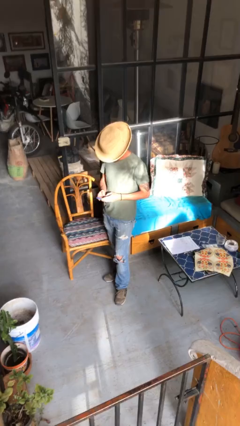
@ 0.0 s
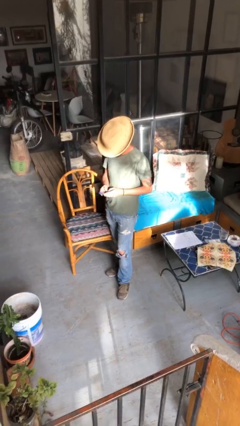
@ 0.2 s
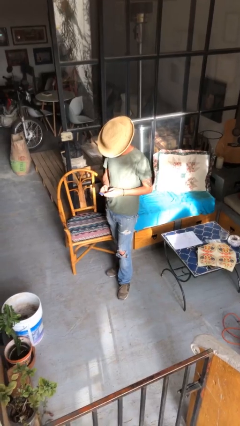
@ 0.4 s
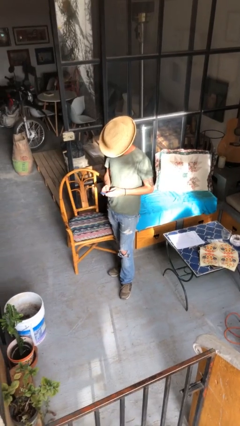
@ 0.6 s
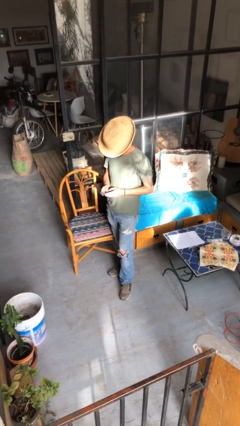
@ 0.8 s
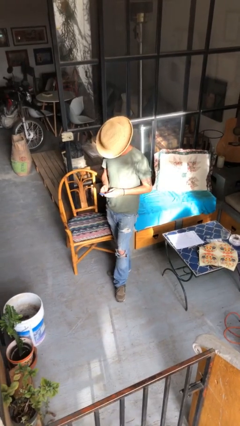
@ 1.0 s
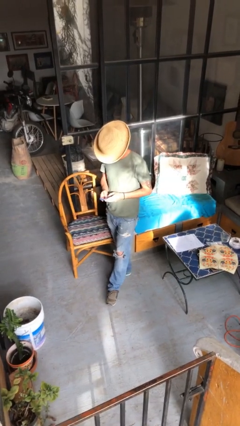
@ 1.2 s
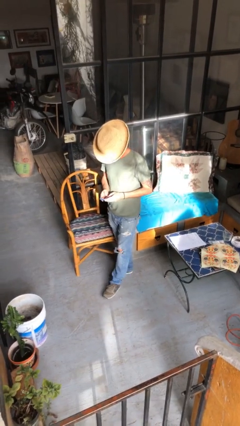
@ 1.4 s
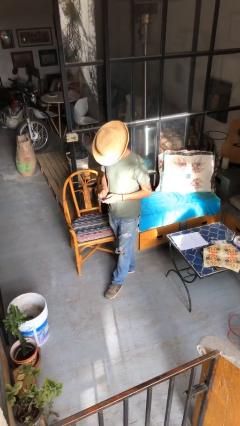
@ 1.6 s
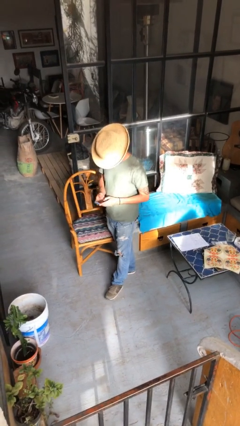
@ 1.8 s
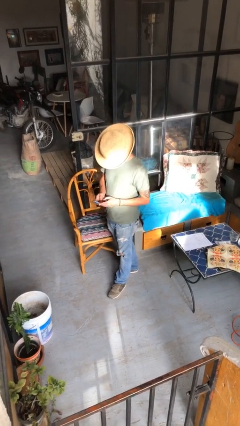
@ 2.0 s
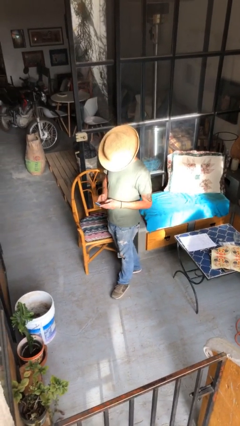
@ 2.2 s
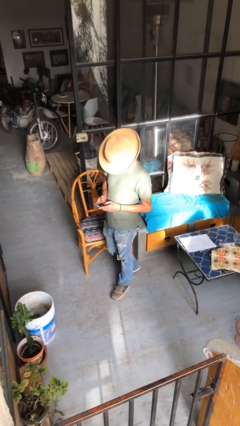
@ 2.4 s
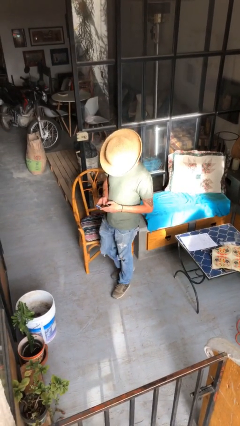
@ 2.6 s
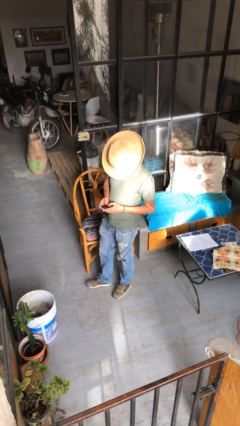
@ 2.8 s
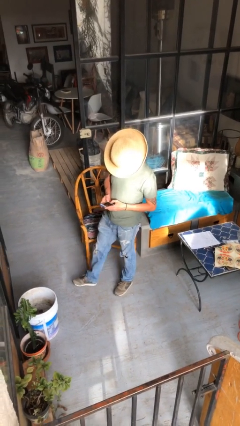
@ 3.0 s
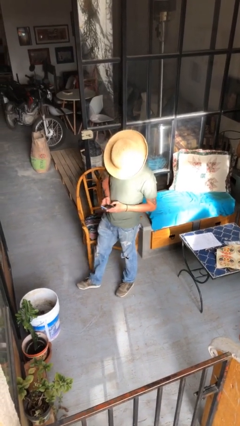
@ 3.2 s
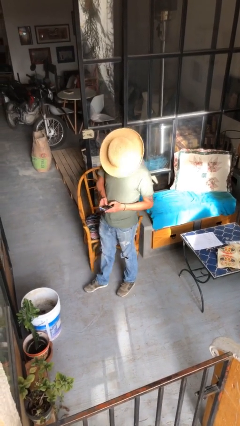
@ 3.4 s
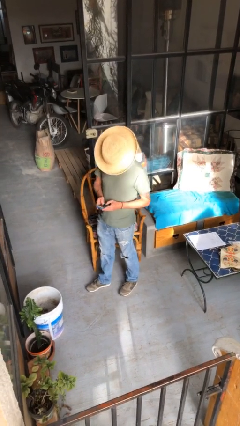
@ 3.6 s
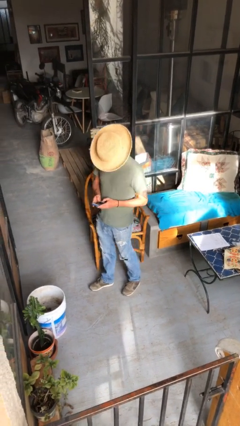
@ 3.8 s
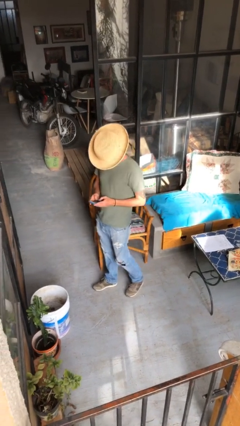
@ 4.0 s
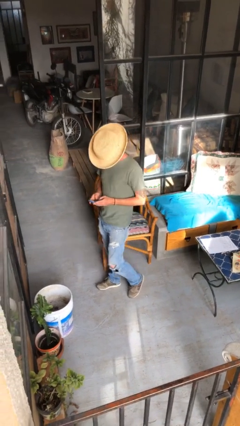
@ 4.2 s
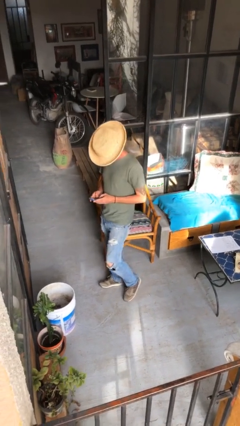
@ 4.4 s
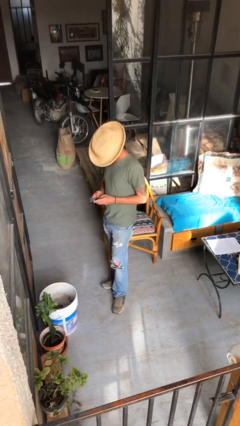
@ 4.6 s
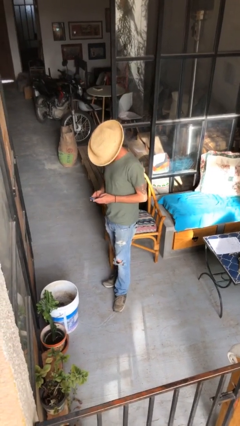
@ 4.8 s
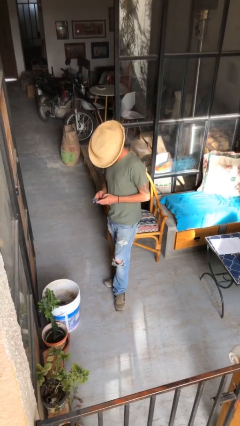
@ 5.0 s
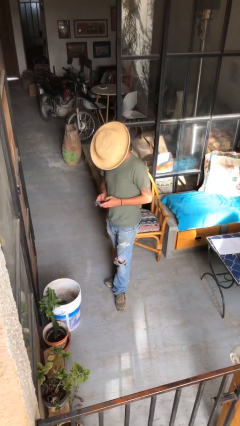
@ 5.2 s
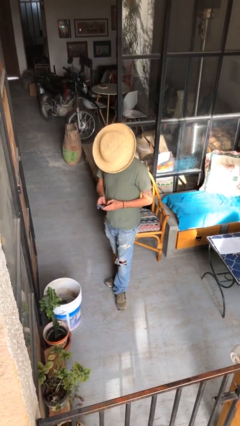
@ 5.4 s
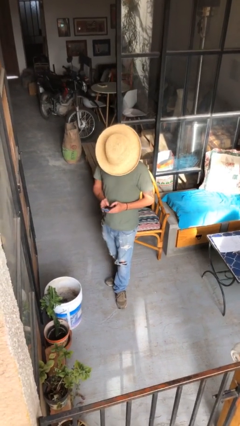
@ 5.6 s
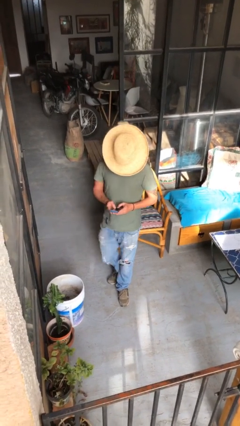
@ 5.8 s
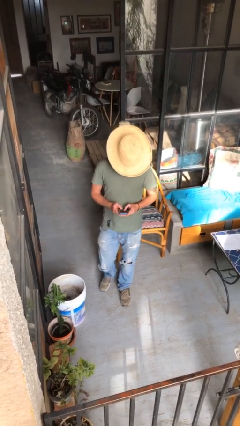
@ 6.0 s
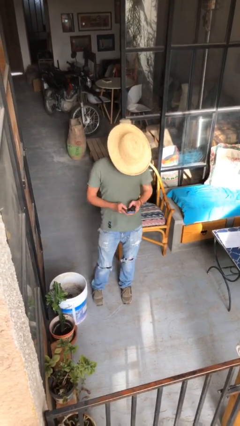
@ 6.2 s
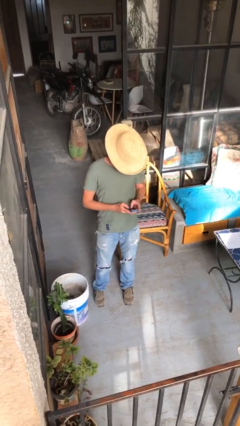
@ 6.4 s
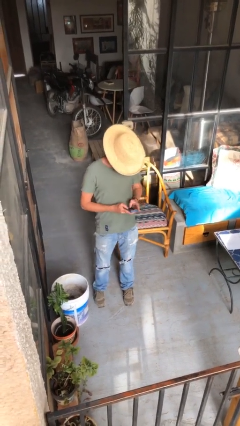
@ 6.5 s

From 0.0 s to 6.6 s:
person texts on phone

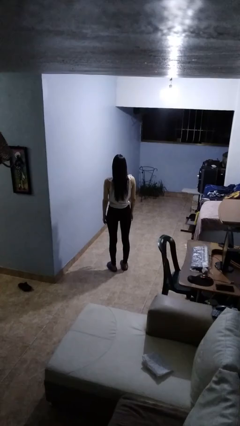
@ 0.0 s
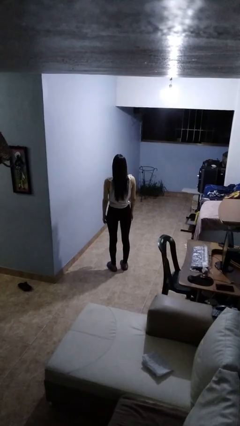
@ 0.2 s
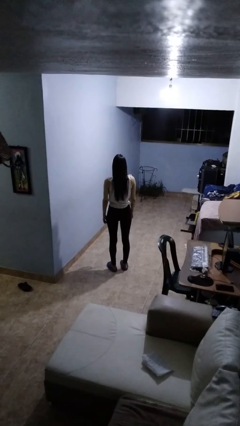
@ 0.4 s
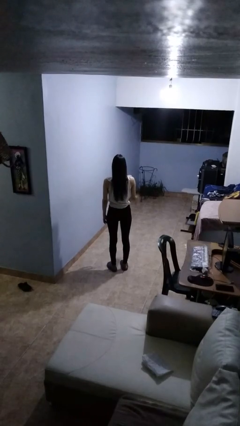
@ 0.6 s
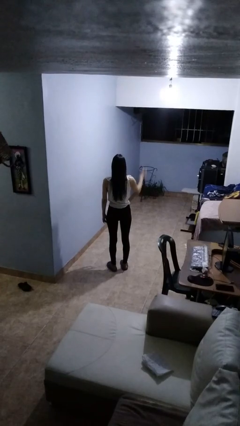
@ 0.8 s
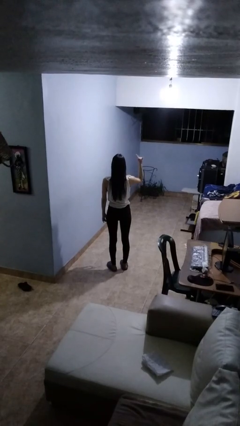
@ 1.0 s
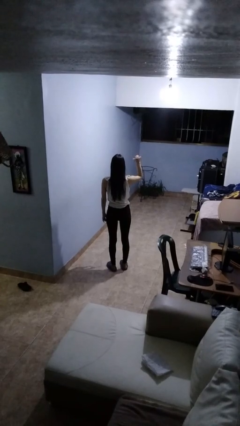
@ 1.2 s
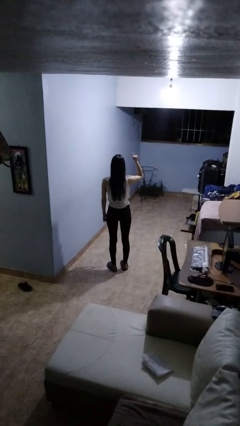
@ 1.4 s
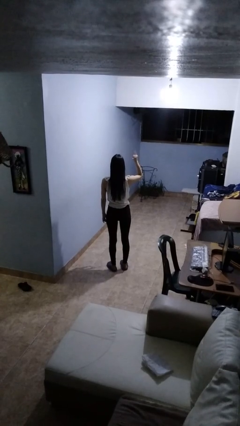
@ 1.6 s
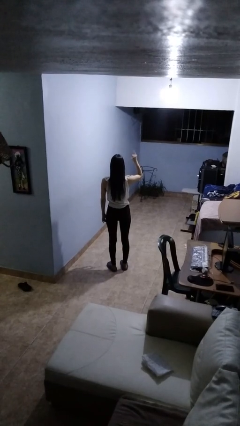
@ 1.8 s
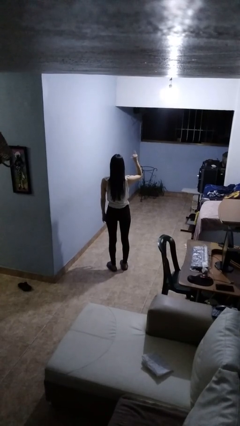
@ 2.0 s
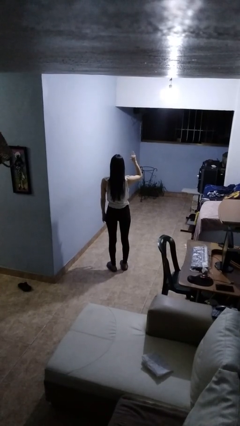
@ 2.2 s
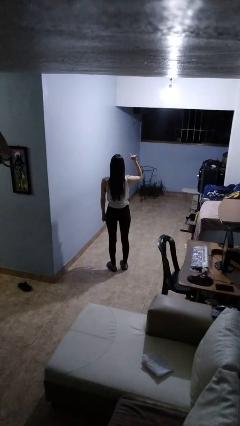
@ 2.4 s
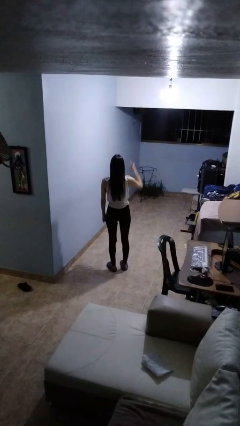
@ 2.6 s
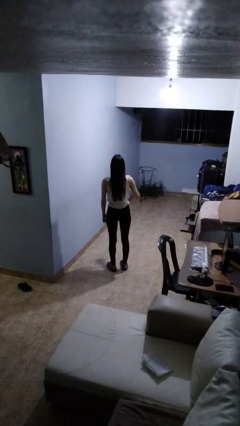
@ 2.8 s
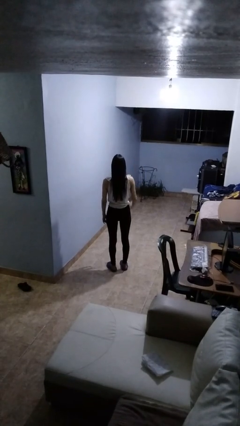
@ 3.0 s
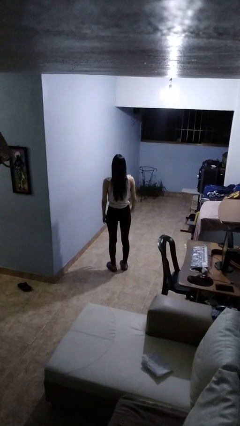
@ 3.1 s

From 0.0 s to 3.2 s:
person gestures hang loose

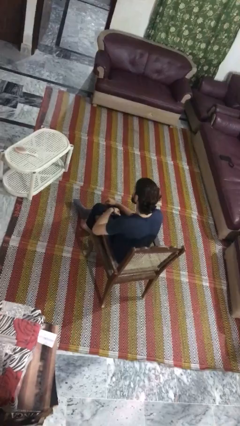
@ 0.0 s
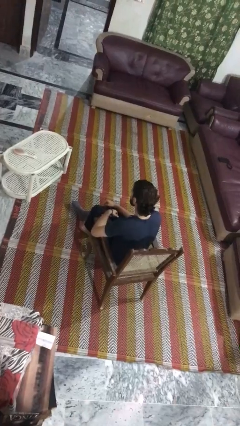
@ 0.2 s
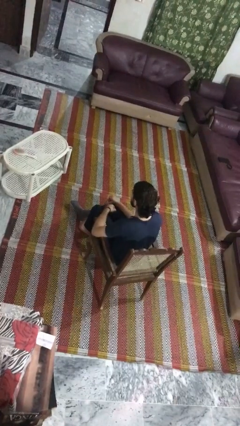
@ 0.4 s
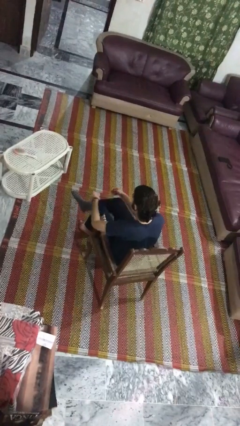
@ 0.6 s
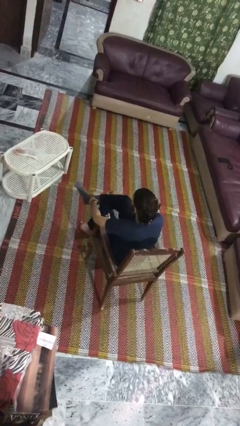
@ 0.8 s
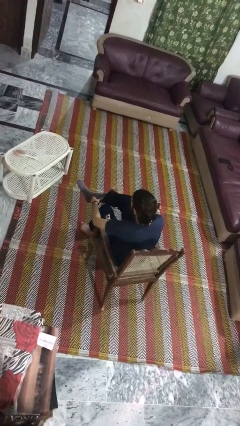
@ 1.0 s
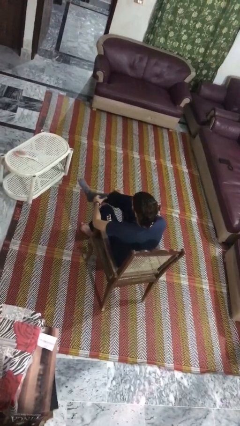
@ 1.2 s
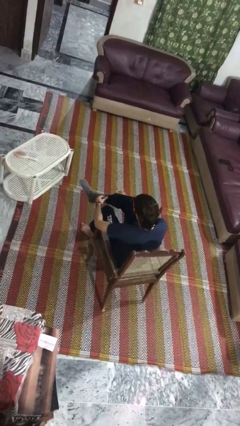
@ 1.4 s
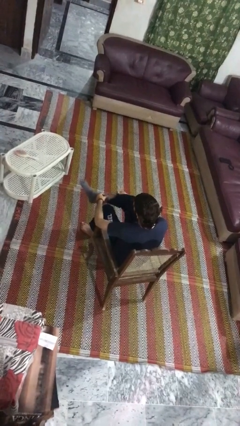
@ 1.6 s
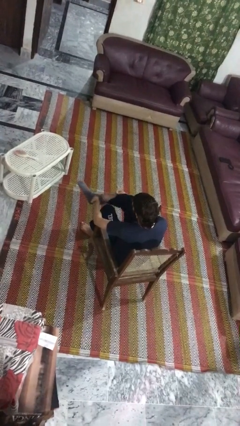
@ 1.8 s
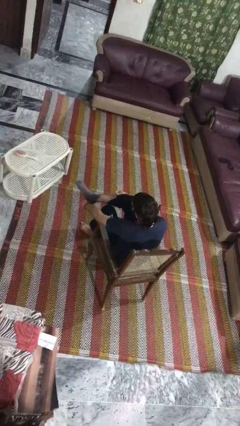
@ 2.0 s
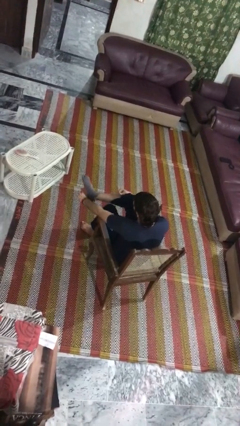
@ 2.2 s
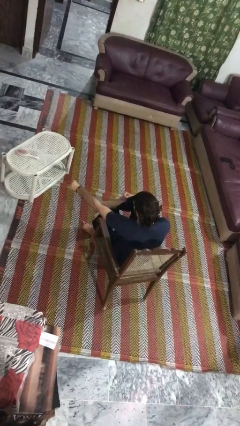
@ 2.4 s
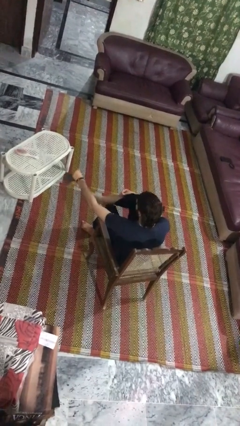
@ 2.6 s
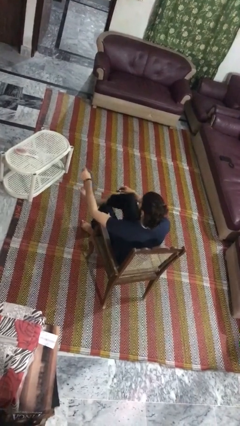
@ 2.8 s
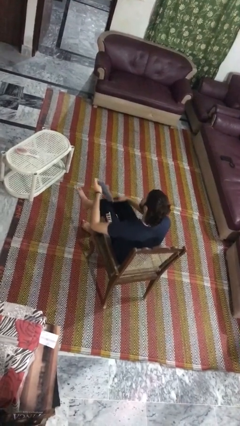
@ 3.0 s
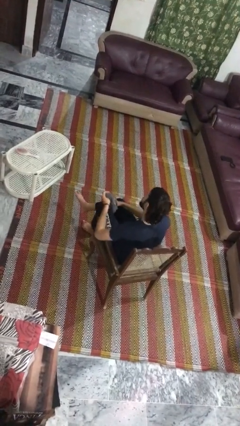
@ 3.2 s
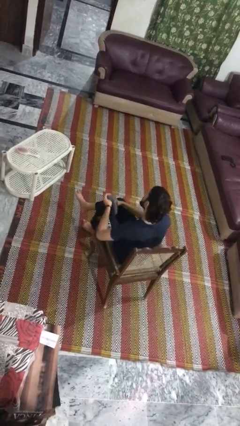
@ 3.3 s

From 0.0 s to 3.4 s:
person takes off socks

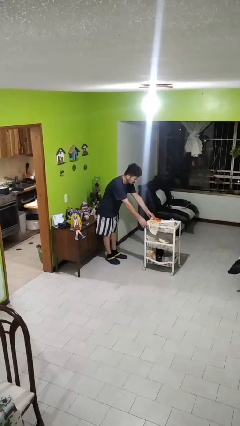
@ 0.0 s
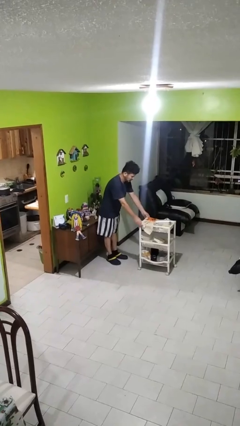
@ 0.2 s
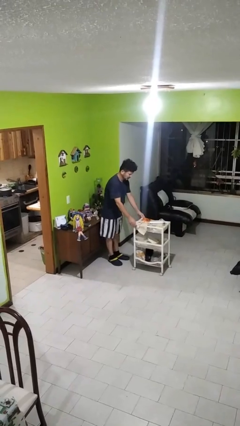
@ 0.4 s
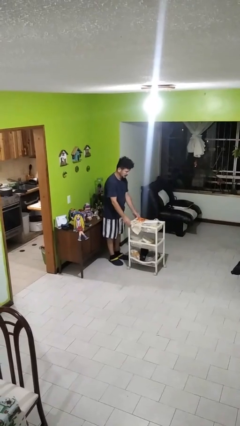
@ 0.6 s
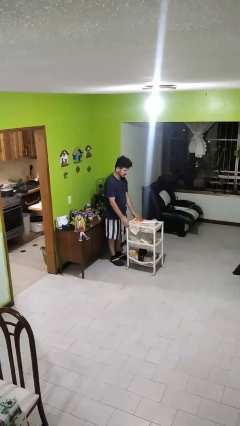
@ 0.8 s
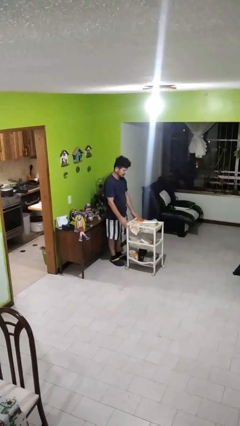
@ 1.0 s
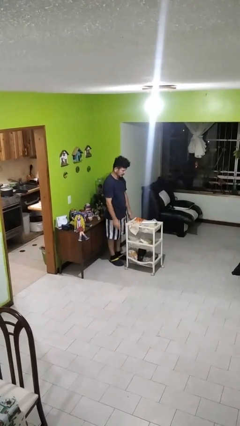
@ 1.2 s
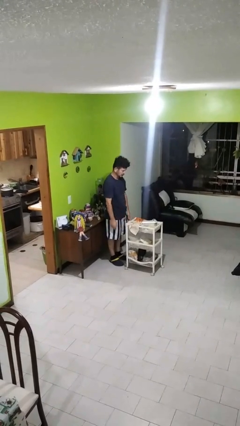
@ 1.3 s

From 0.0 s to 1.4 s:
person pulls wheeled cart

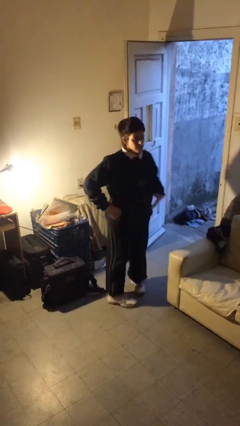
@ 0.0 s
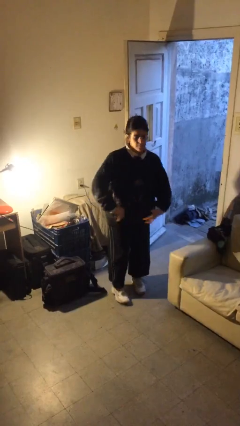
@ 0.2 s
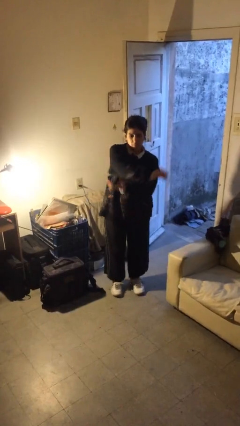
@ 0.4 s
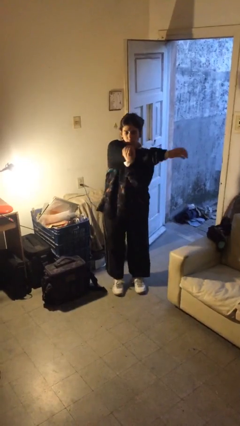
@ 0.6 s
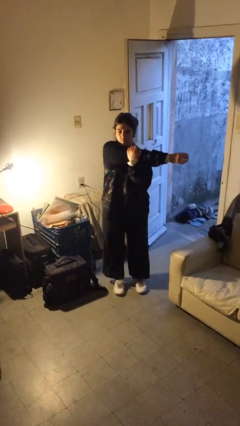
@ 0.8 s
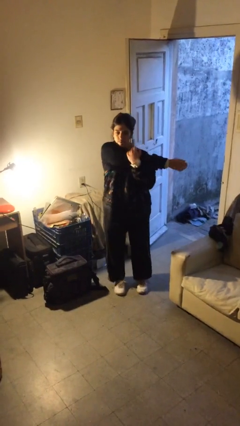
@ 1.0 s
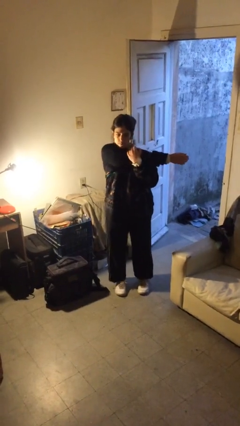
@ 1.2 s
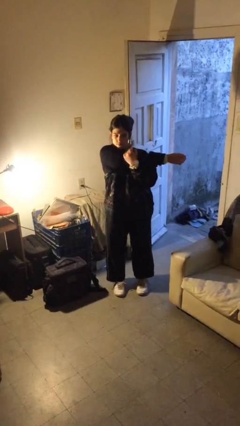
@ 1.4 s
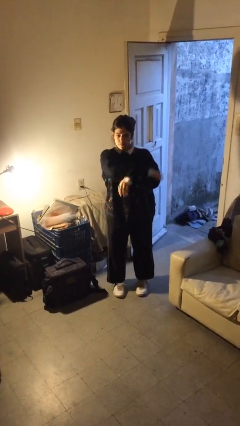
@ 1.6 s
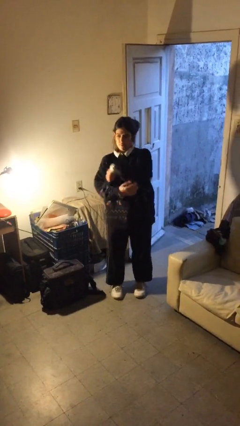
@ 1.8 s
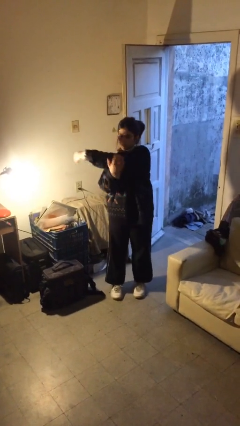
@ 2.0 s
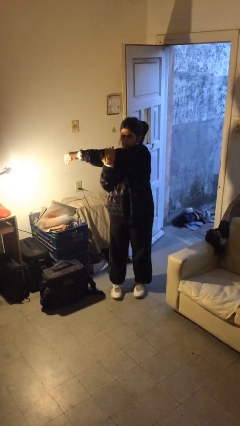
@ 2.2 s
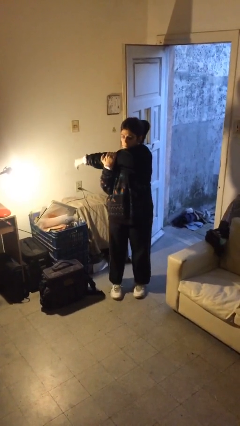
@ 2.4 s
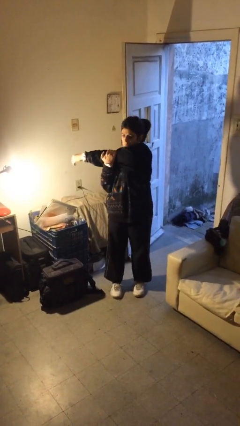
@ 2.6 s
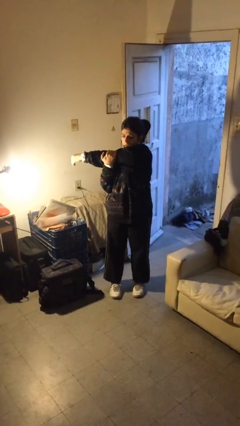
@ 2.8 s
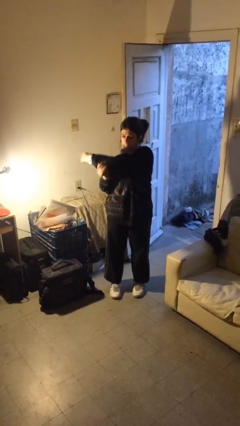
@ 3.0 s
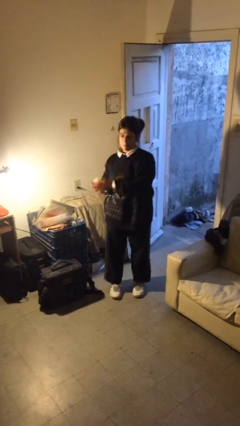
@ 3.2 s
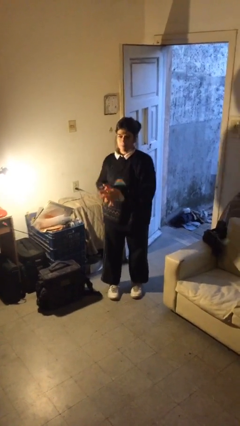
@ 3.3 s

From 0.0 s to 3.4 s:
person stretches arms to side
